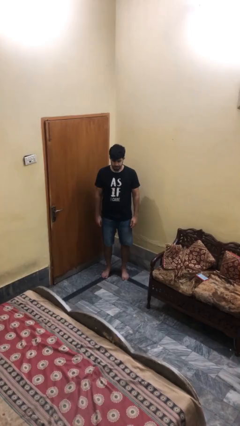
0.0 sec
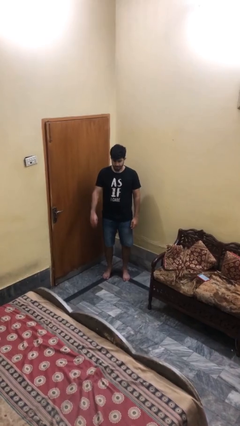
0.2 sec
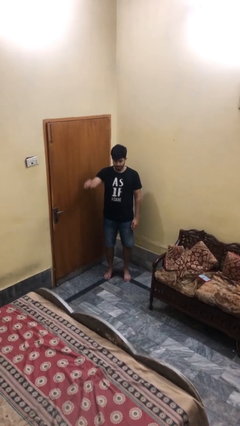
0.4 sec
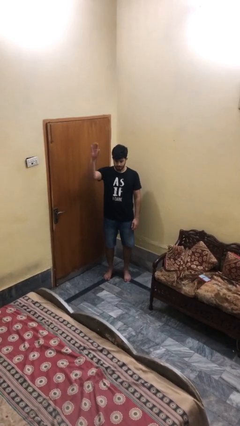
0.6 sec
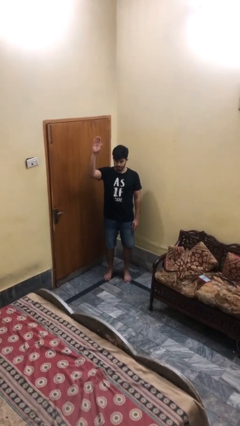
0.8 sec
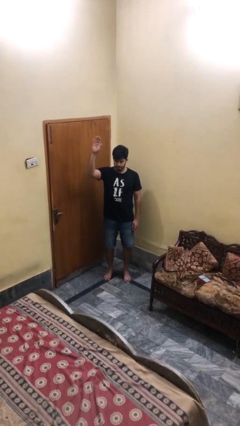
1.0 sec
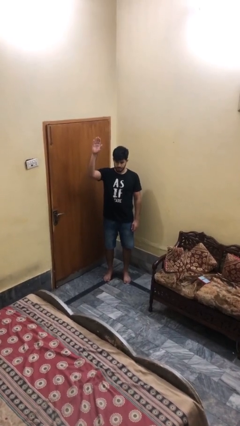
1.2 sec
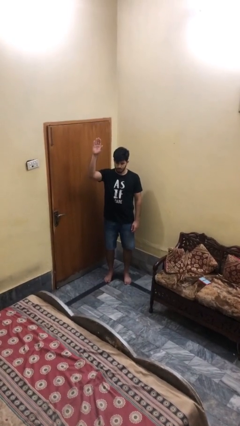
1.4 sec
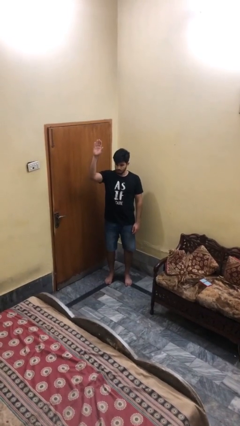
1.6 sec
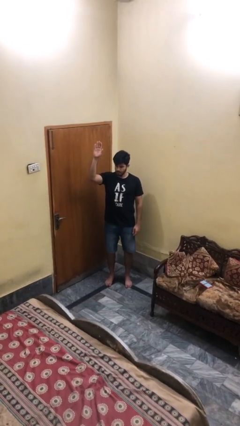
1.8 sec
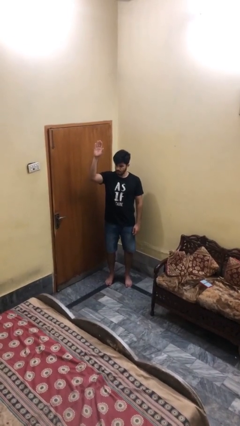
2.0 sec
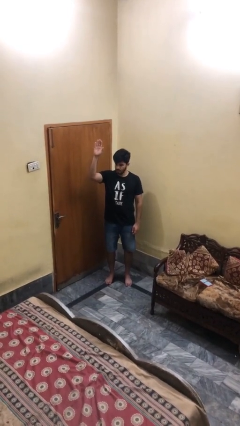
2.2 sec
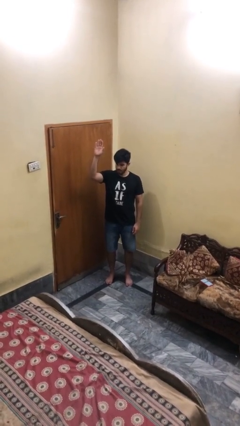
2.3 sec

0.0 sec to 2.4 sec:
person gestures raise hand

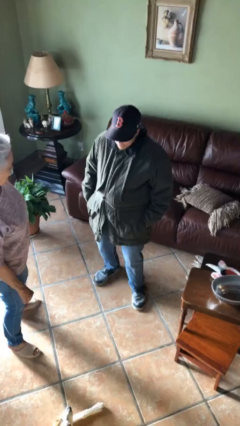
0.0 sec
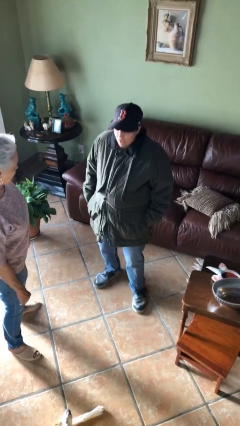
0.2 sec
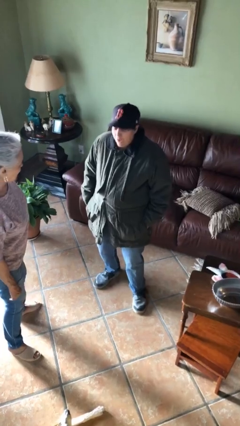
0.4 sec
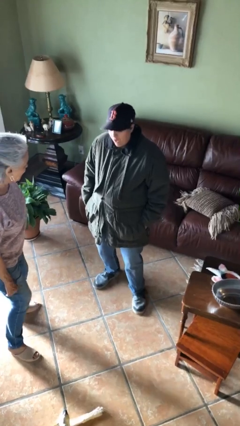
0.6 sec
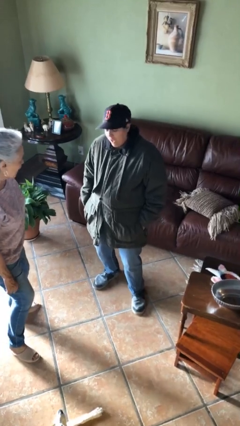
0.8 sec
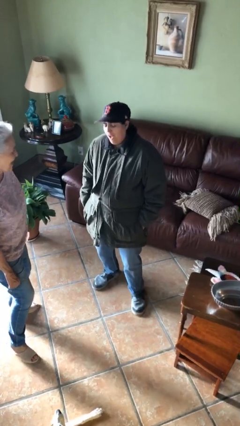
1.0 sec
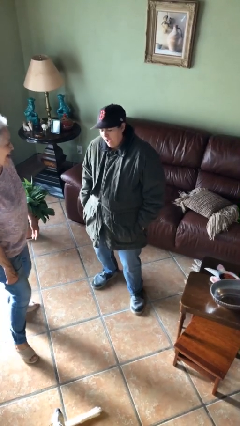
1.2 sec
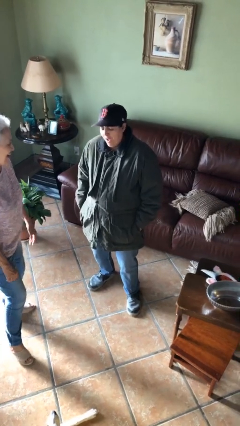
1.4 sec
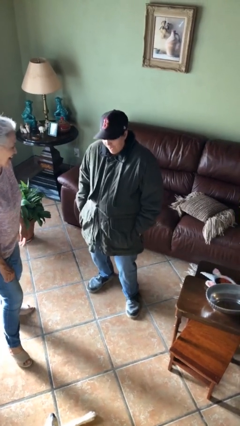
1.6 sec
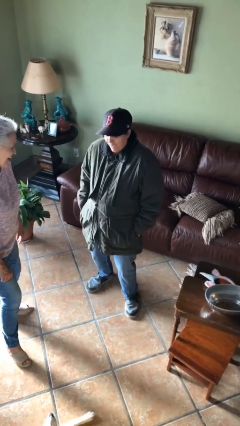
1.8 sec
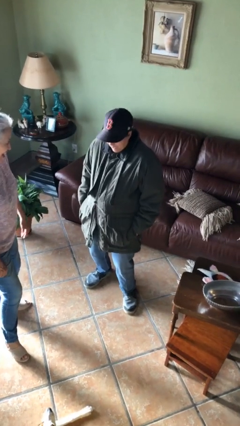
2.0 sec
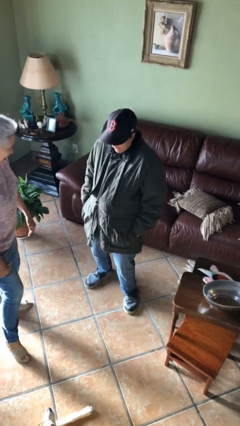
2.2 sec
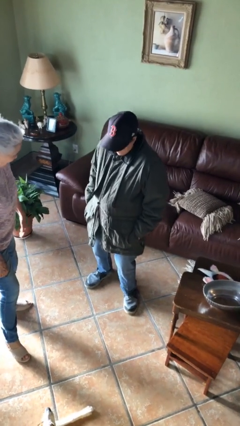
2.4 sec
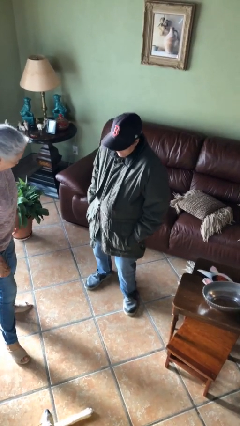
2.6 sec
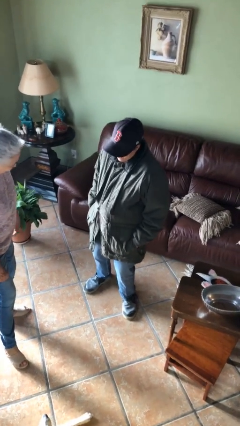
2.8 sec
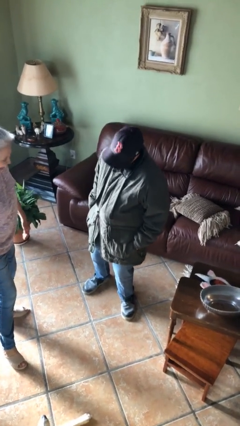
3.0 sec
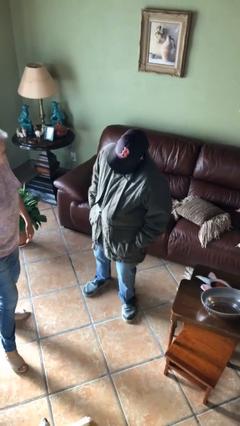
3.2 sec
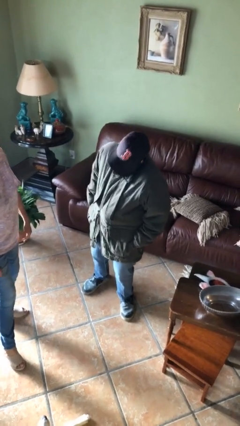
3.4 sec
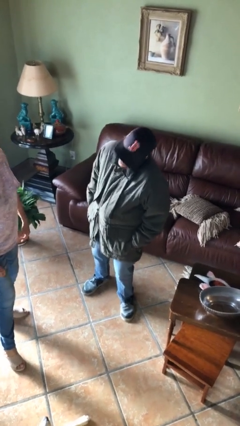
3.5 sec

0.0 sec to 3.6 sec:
person laughs with person

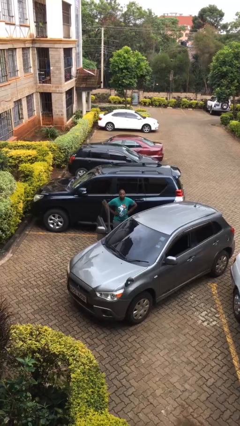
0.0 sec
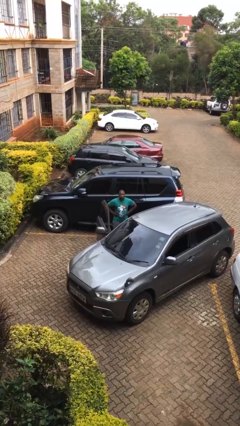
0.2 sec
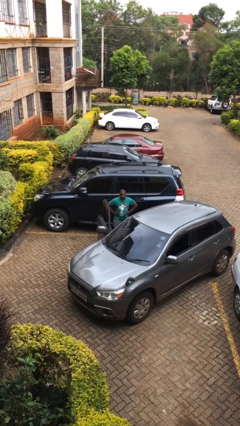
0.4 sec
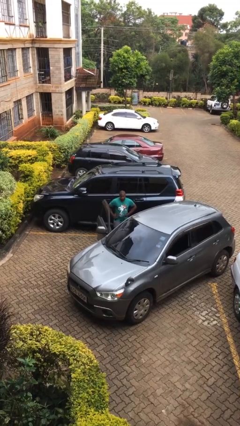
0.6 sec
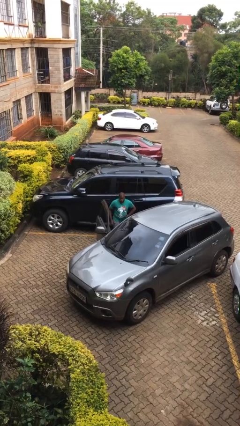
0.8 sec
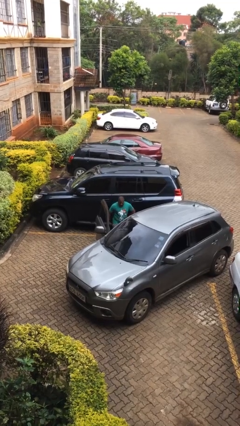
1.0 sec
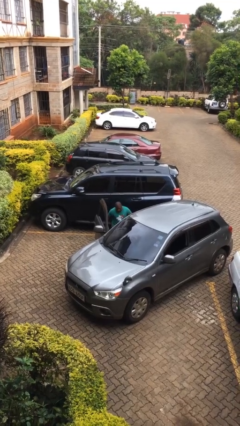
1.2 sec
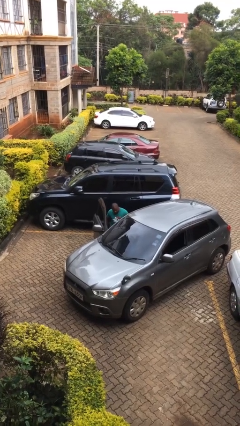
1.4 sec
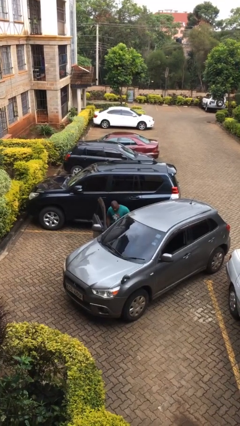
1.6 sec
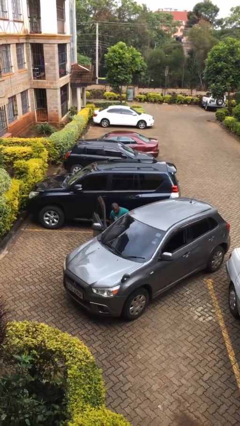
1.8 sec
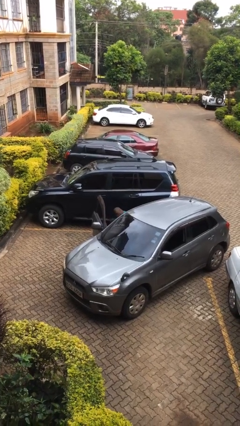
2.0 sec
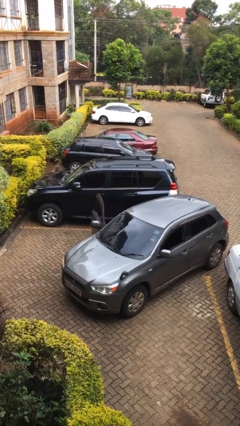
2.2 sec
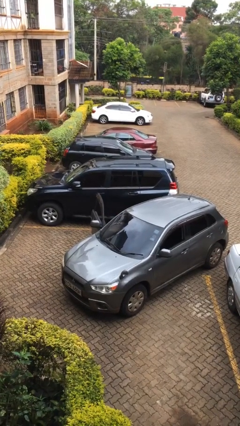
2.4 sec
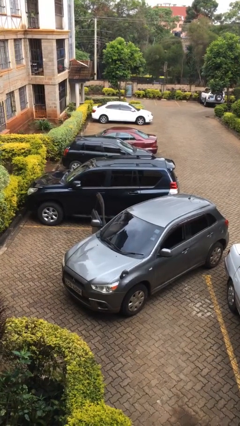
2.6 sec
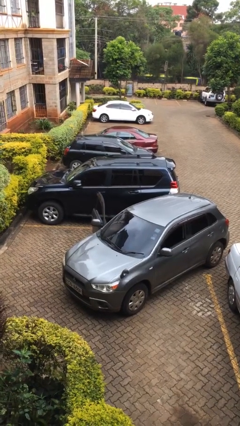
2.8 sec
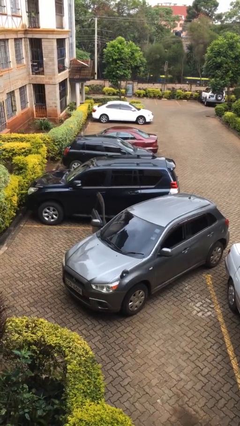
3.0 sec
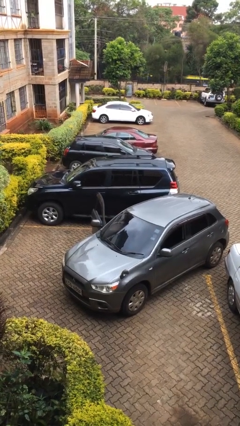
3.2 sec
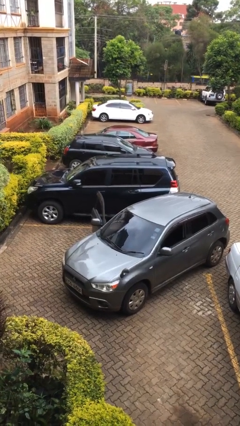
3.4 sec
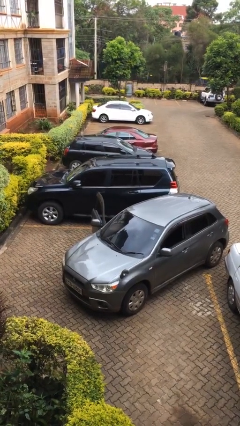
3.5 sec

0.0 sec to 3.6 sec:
person enters car

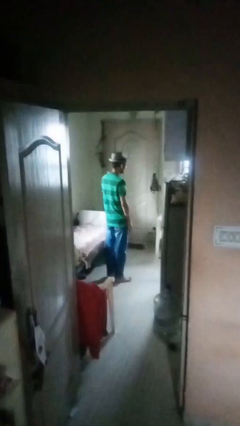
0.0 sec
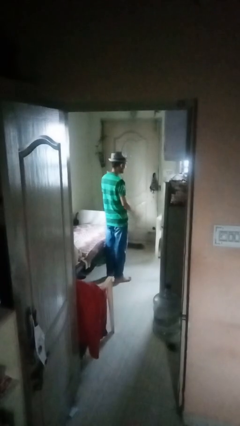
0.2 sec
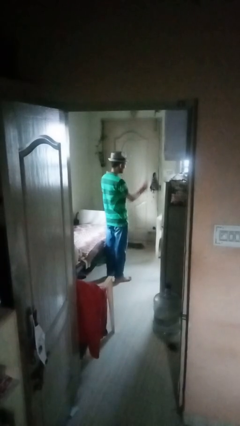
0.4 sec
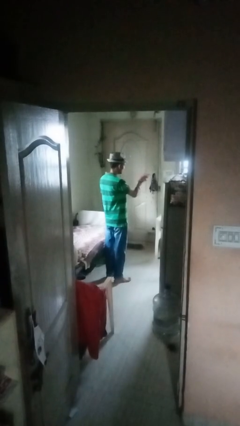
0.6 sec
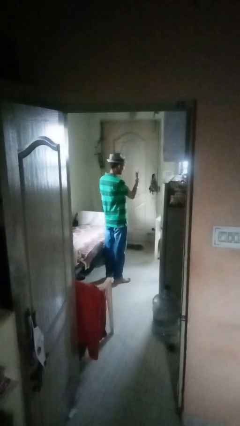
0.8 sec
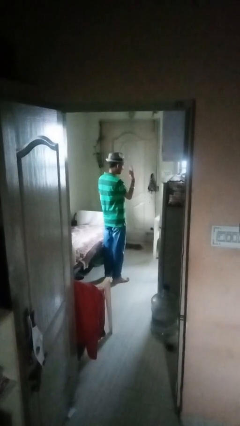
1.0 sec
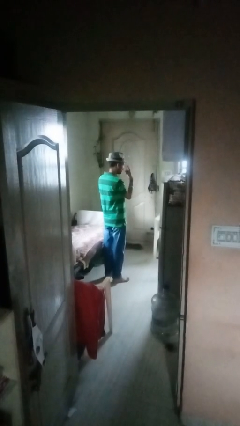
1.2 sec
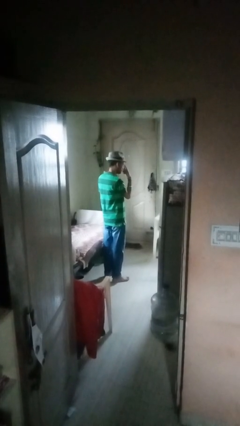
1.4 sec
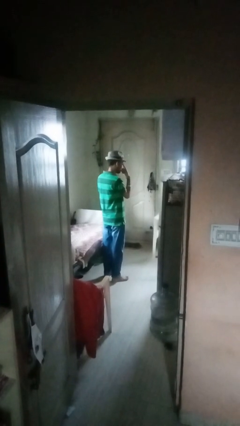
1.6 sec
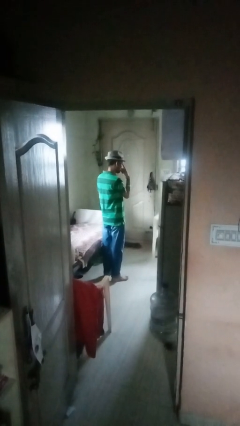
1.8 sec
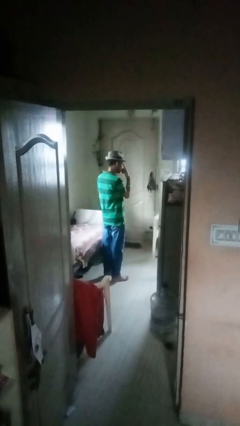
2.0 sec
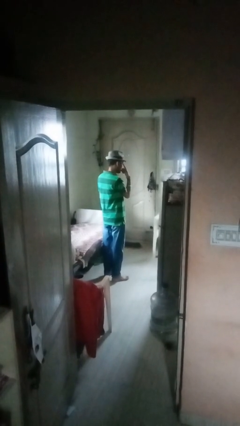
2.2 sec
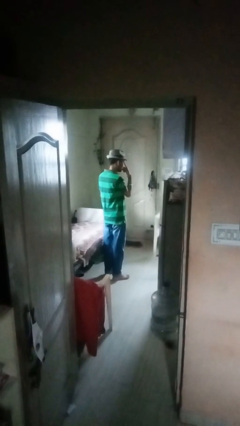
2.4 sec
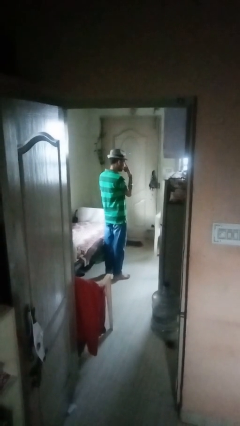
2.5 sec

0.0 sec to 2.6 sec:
person gestures watch closely

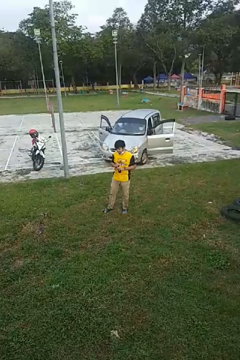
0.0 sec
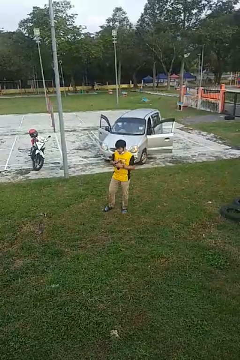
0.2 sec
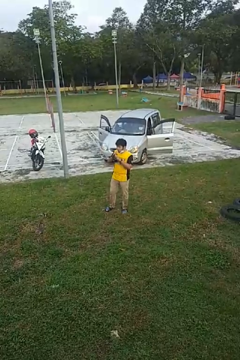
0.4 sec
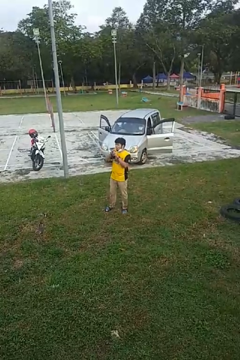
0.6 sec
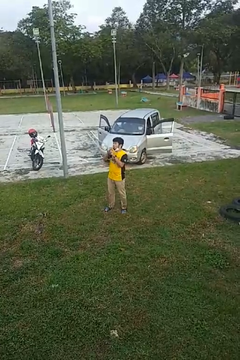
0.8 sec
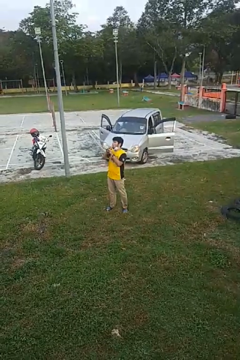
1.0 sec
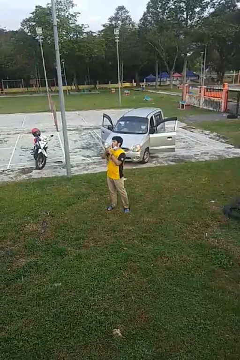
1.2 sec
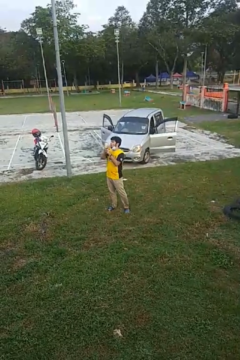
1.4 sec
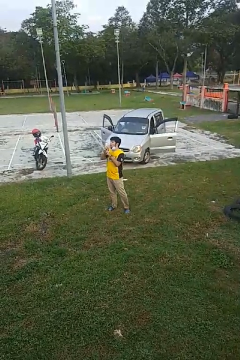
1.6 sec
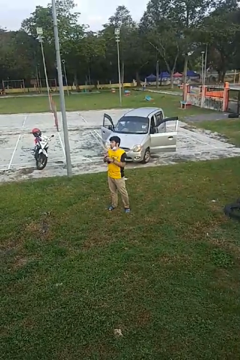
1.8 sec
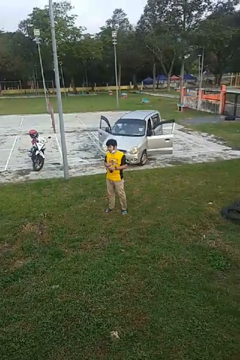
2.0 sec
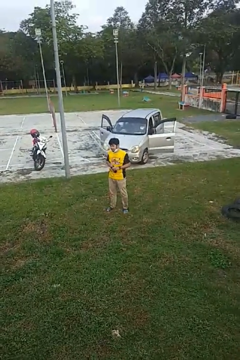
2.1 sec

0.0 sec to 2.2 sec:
person drinks from straw

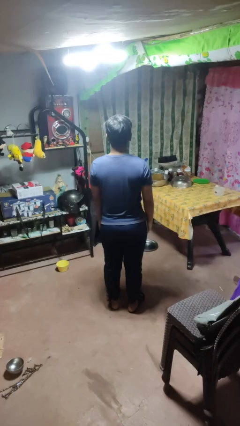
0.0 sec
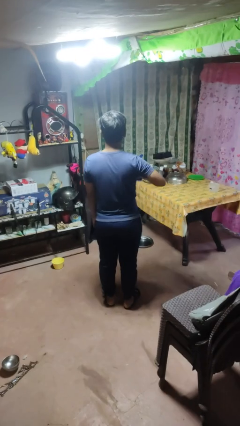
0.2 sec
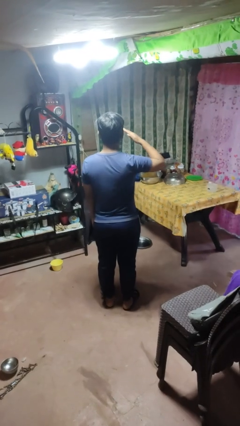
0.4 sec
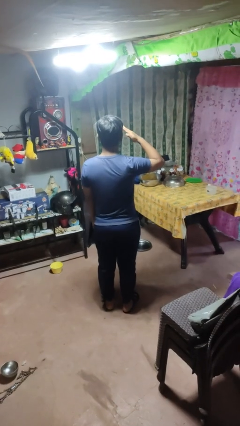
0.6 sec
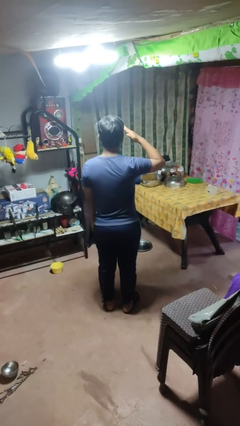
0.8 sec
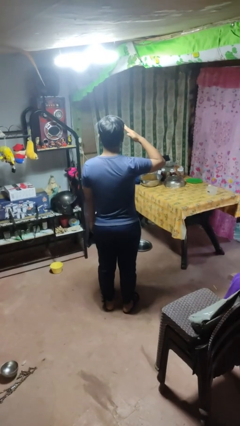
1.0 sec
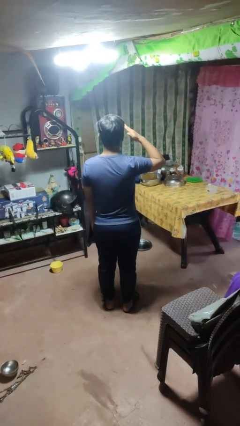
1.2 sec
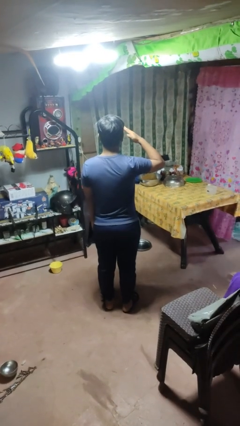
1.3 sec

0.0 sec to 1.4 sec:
person salutes

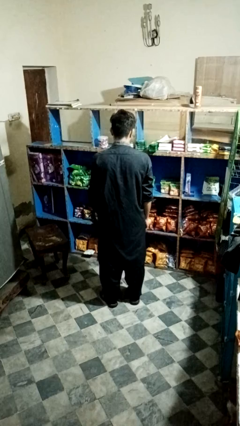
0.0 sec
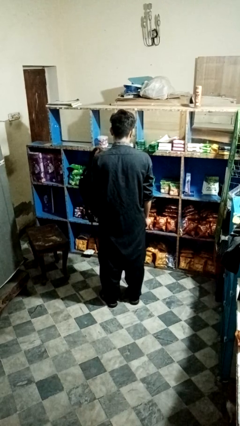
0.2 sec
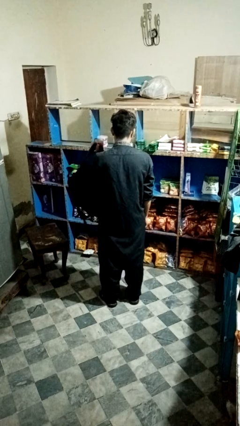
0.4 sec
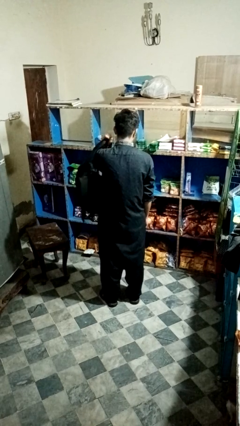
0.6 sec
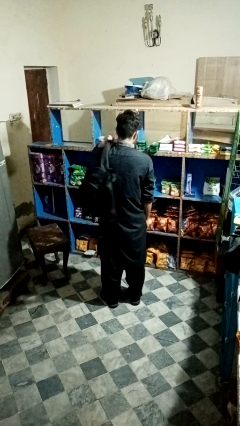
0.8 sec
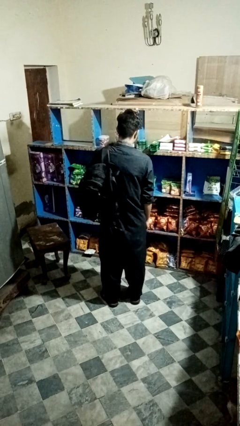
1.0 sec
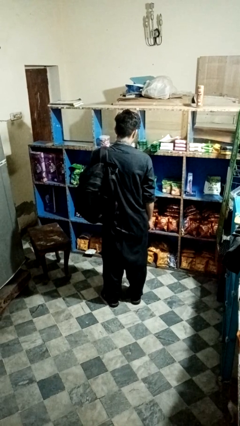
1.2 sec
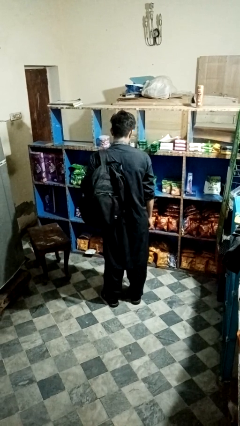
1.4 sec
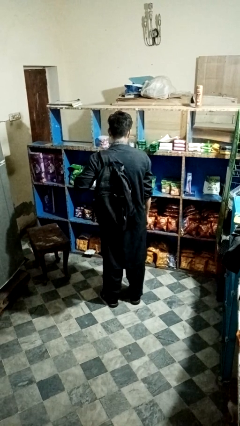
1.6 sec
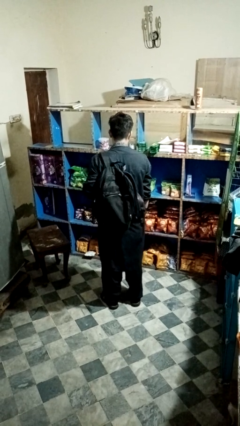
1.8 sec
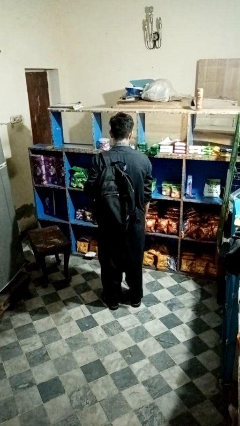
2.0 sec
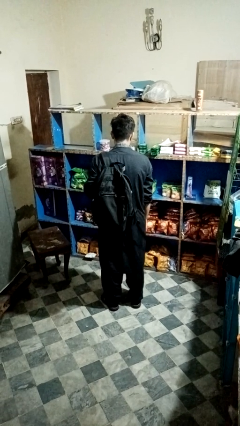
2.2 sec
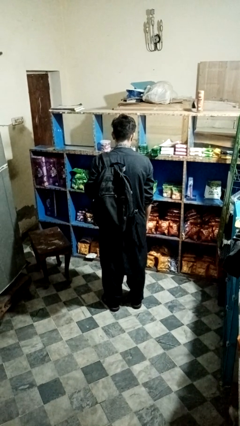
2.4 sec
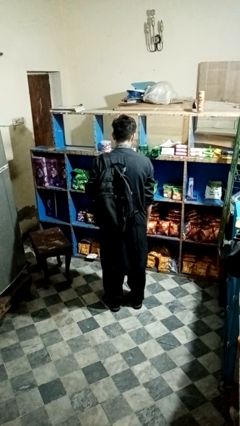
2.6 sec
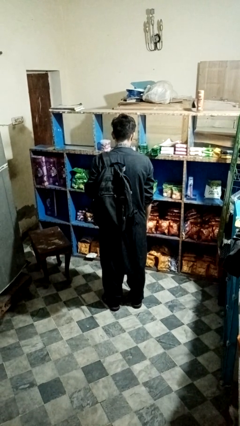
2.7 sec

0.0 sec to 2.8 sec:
person puts on backpack
